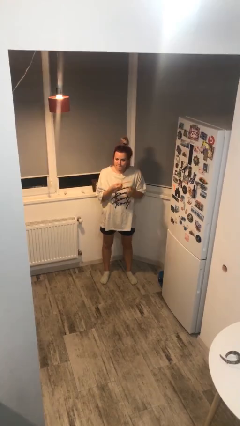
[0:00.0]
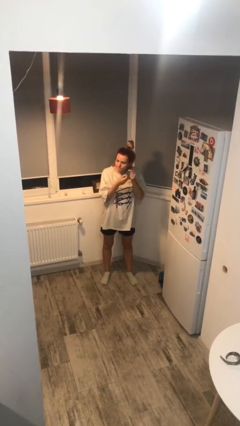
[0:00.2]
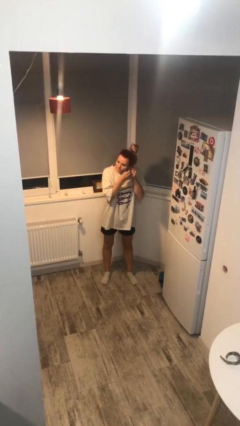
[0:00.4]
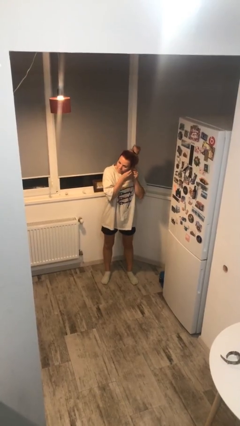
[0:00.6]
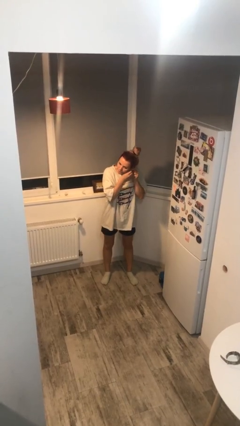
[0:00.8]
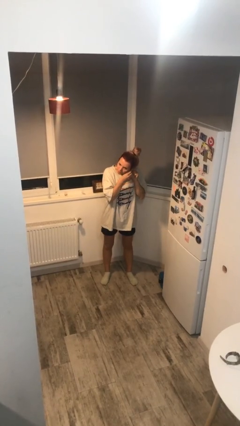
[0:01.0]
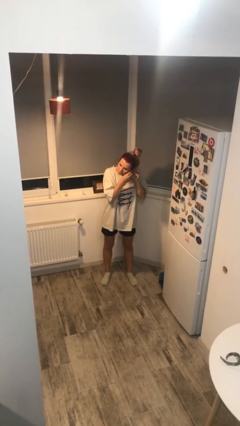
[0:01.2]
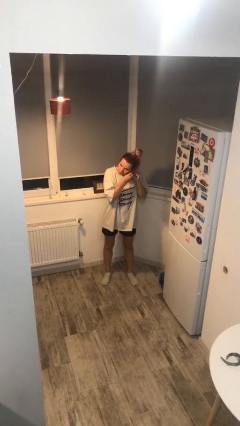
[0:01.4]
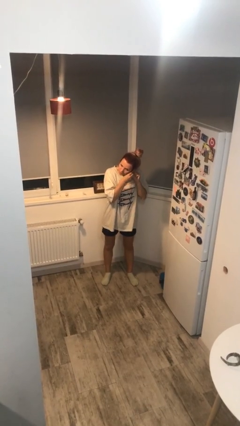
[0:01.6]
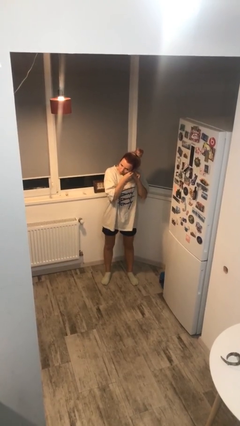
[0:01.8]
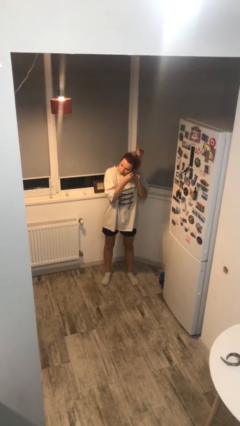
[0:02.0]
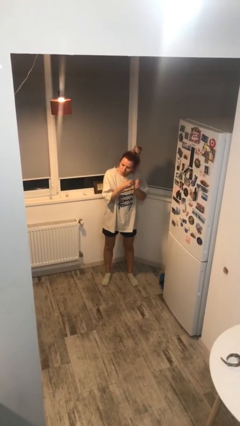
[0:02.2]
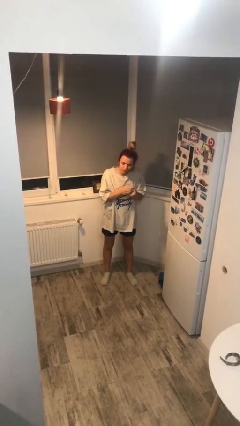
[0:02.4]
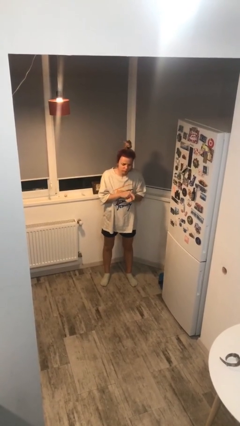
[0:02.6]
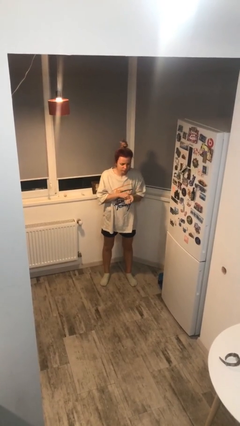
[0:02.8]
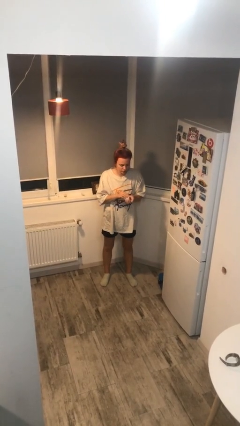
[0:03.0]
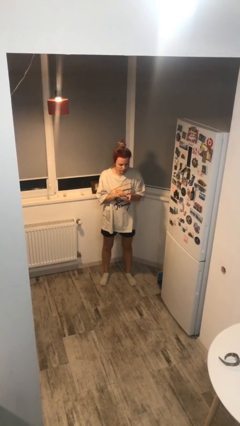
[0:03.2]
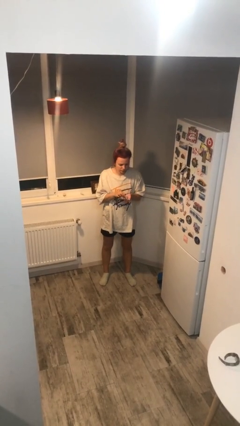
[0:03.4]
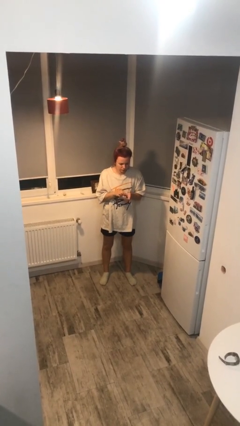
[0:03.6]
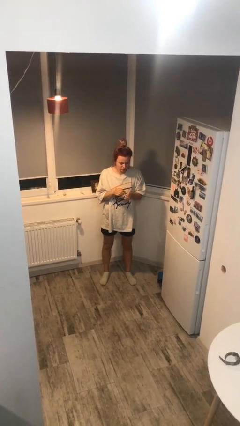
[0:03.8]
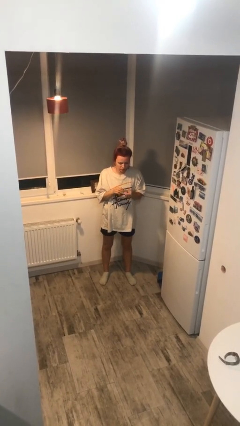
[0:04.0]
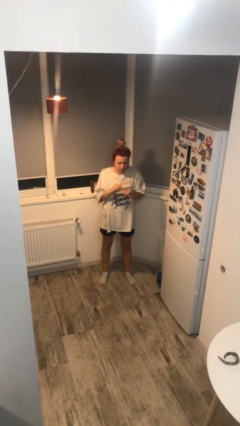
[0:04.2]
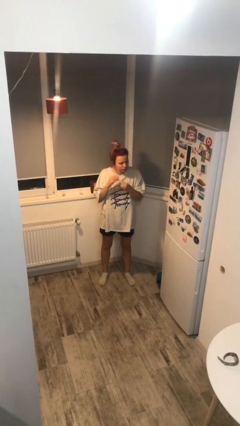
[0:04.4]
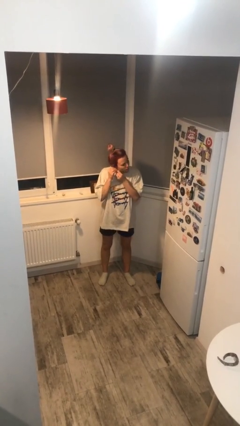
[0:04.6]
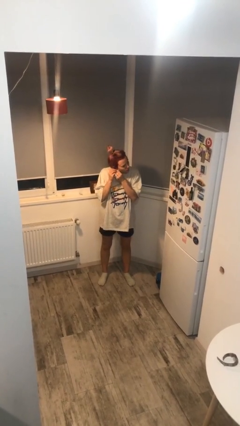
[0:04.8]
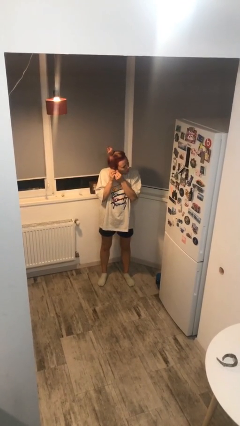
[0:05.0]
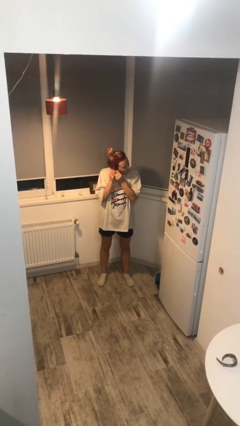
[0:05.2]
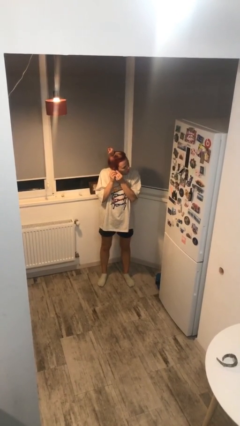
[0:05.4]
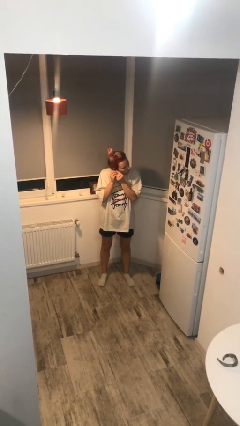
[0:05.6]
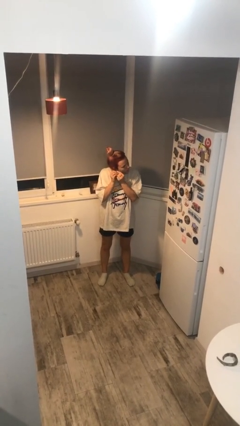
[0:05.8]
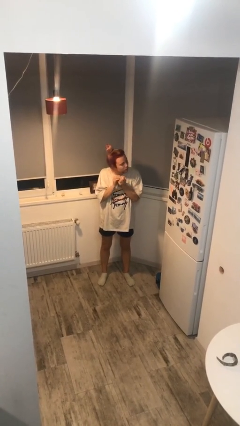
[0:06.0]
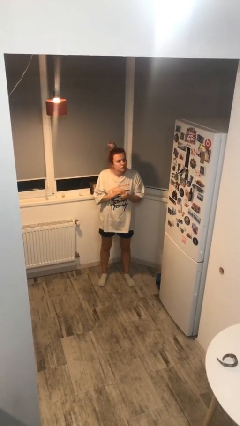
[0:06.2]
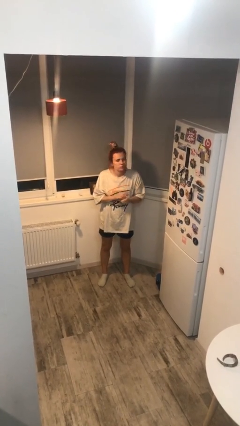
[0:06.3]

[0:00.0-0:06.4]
person puts on earrings

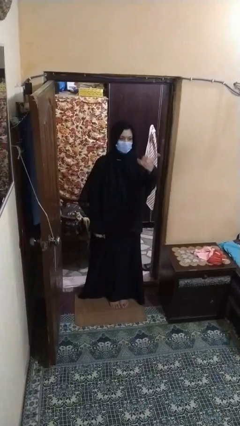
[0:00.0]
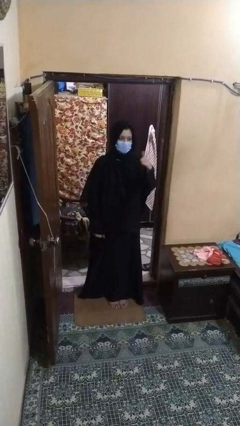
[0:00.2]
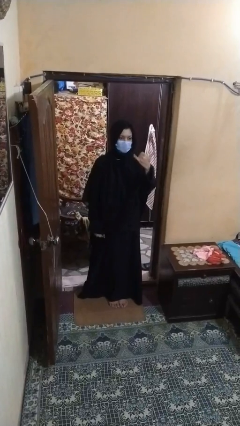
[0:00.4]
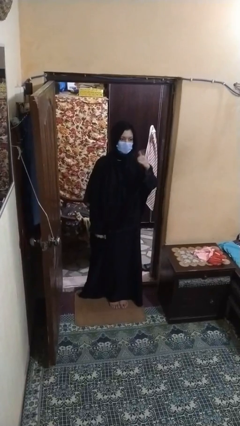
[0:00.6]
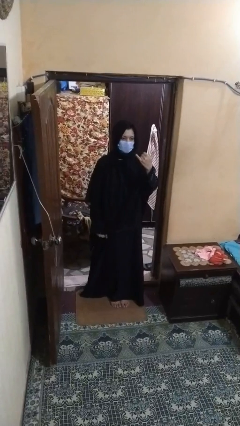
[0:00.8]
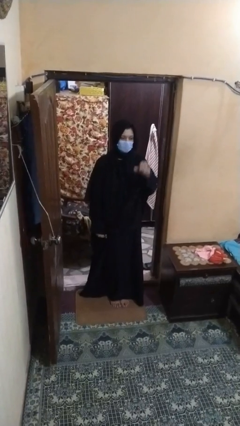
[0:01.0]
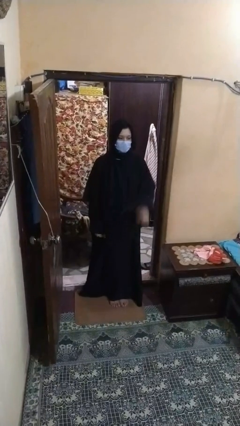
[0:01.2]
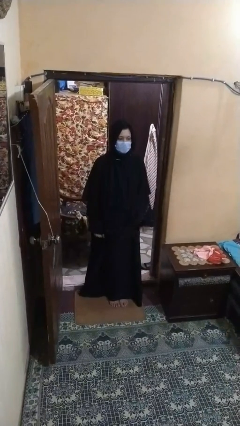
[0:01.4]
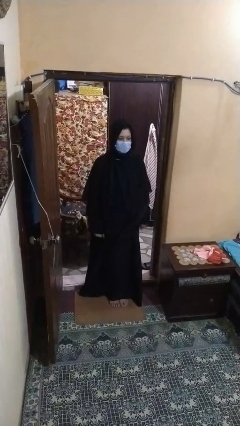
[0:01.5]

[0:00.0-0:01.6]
person gestures hang loose

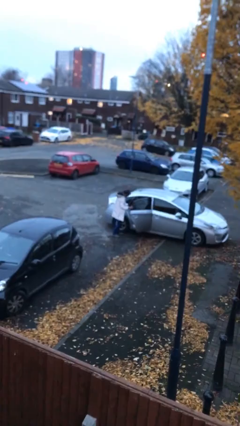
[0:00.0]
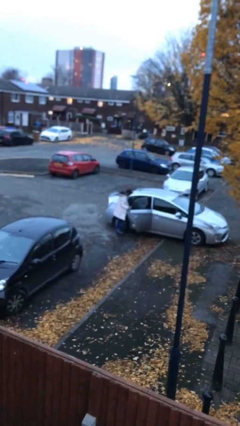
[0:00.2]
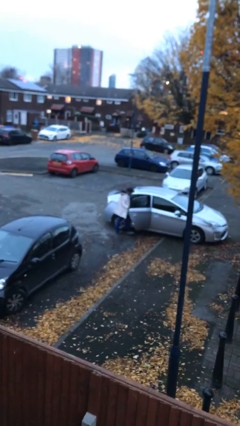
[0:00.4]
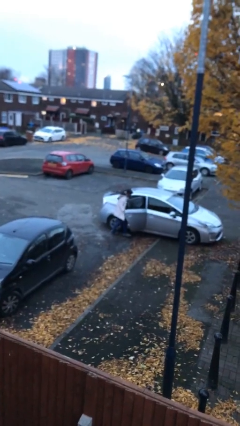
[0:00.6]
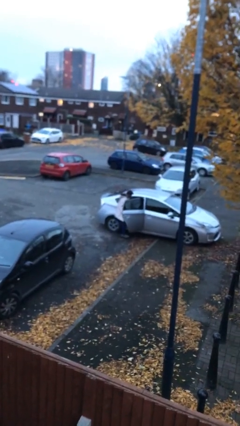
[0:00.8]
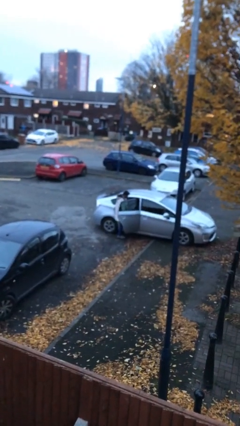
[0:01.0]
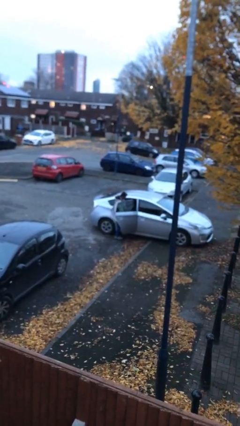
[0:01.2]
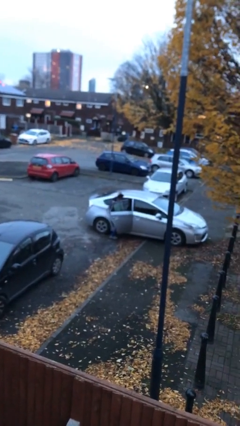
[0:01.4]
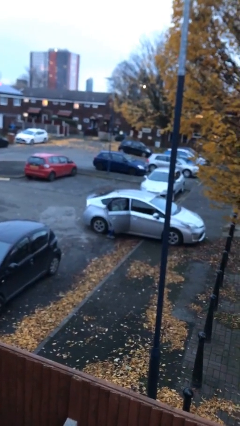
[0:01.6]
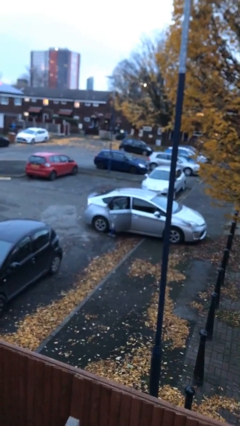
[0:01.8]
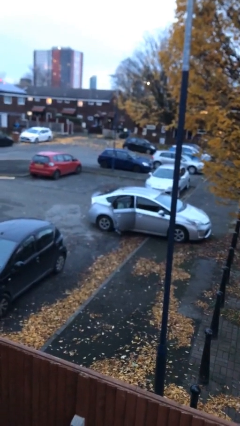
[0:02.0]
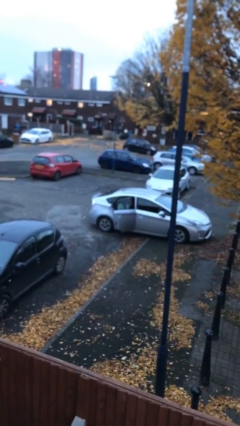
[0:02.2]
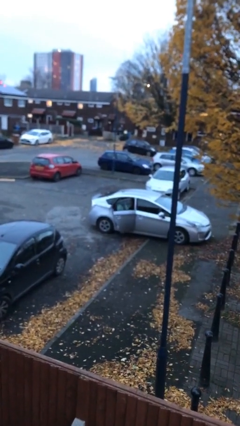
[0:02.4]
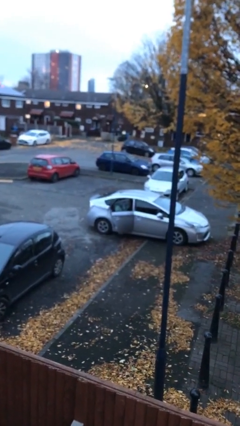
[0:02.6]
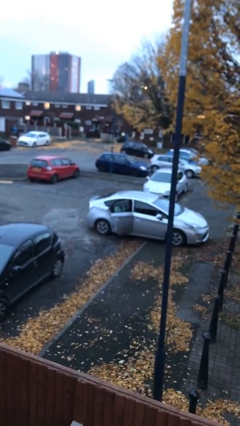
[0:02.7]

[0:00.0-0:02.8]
person enters car

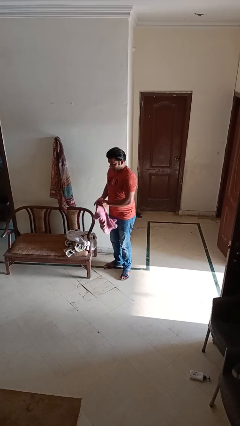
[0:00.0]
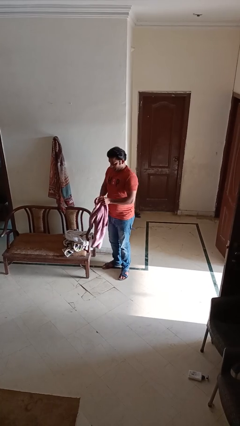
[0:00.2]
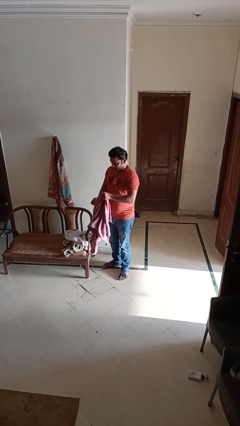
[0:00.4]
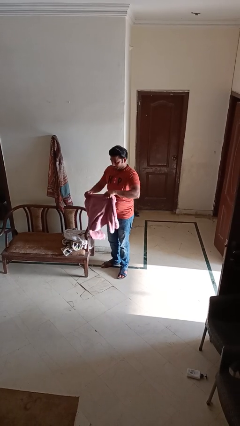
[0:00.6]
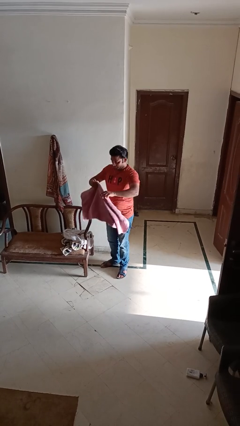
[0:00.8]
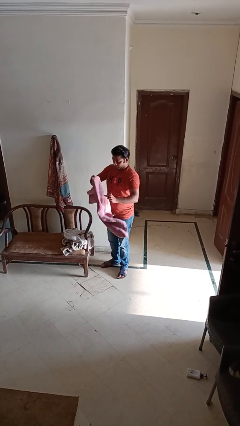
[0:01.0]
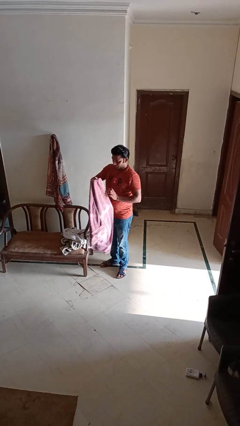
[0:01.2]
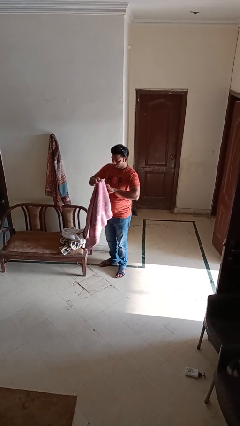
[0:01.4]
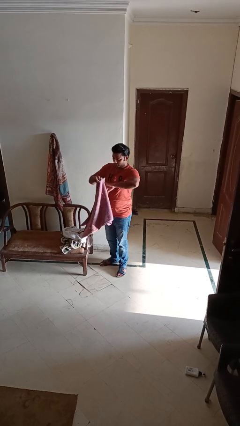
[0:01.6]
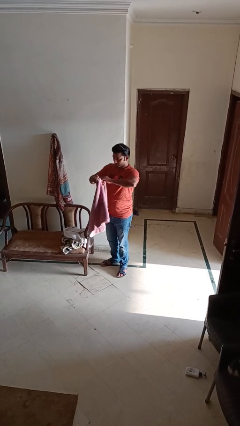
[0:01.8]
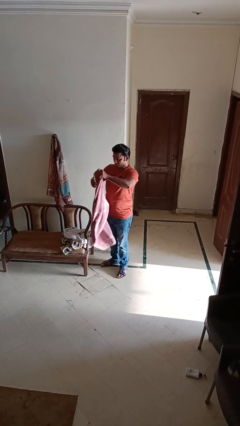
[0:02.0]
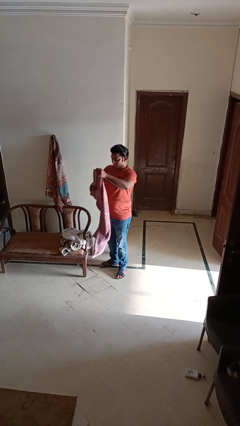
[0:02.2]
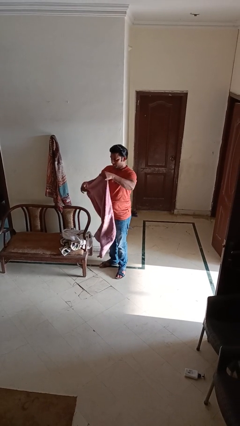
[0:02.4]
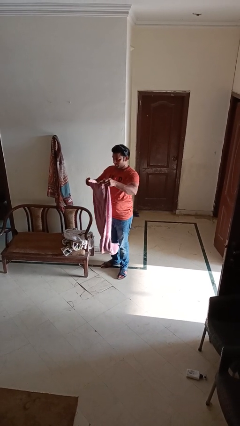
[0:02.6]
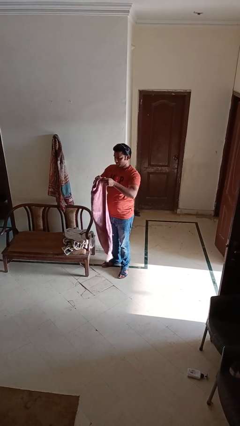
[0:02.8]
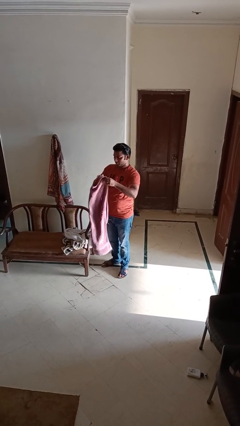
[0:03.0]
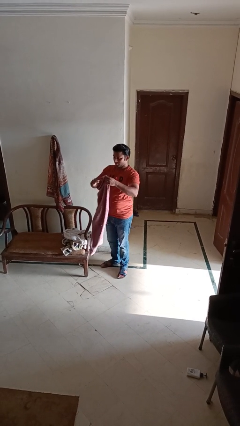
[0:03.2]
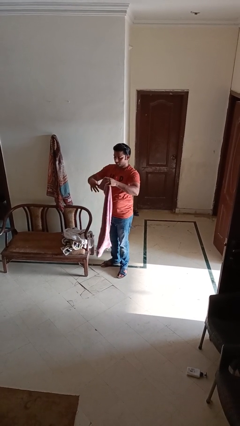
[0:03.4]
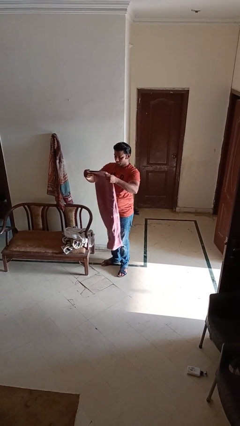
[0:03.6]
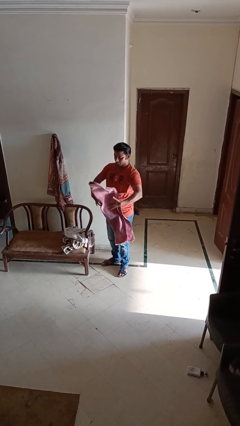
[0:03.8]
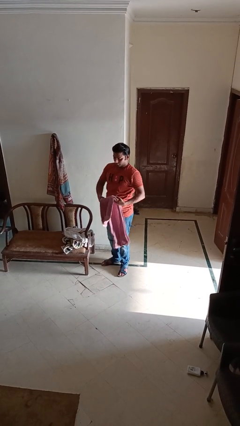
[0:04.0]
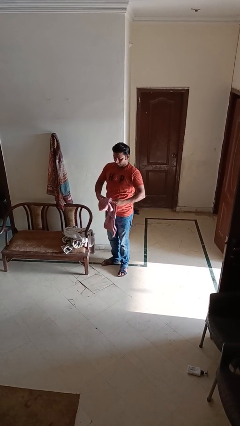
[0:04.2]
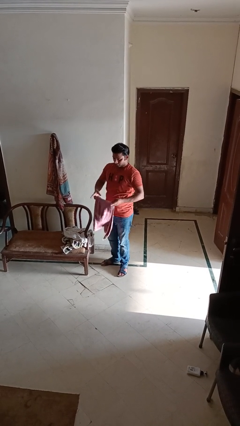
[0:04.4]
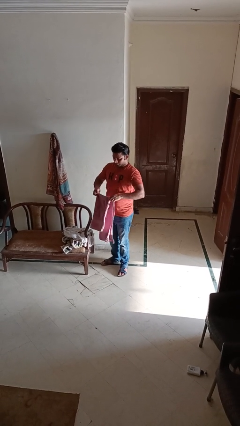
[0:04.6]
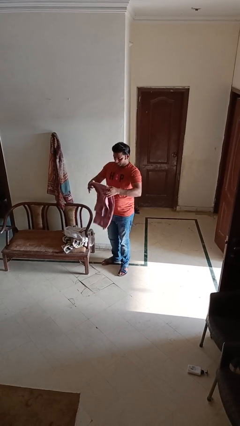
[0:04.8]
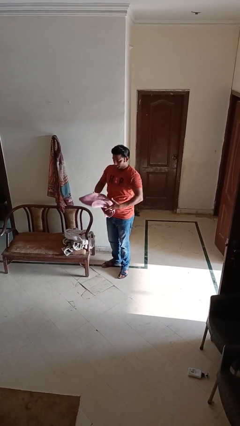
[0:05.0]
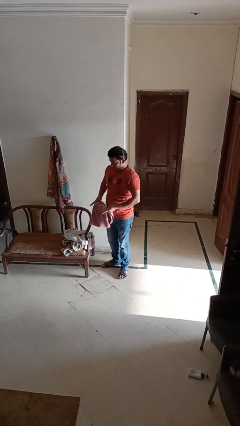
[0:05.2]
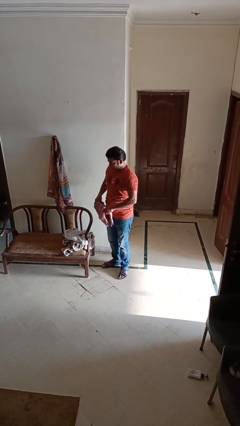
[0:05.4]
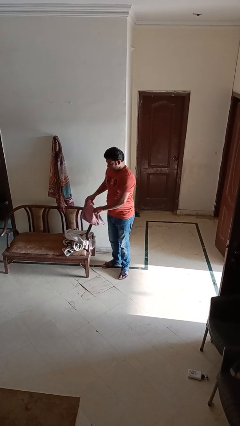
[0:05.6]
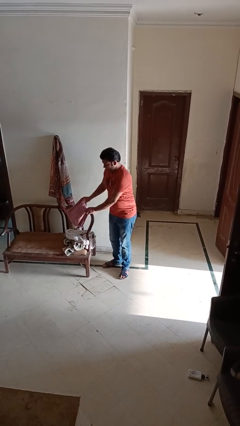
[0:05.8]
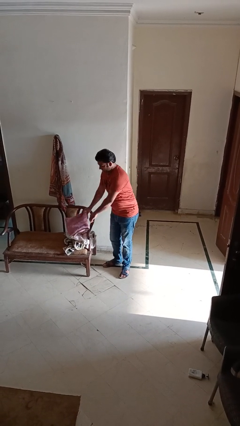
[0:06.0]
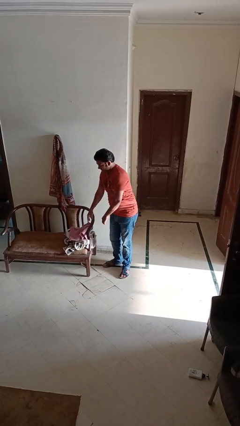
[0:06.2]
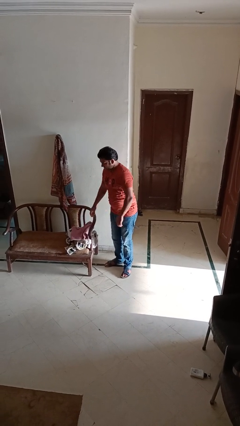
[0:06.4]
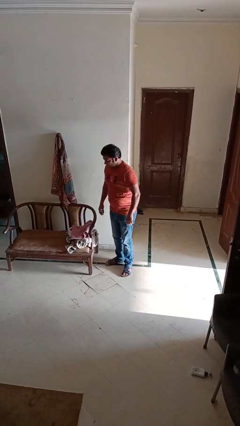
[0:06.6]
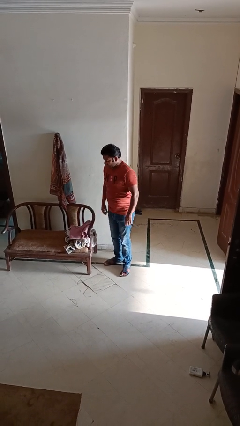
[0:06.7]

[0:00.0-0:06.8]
person folds towel

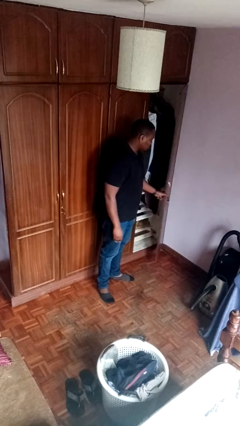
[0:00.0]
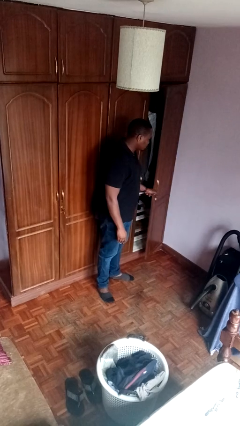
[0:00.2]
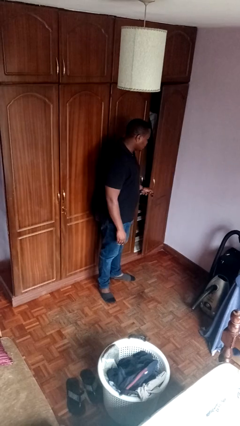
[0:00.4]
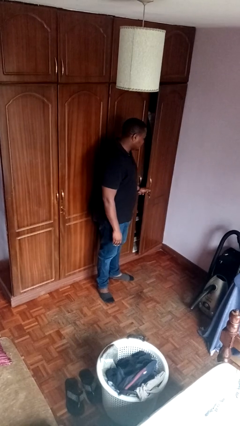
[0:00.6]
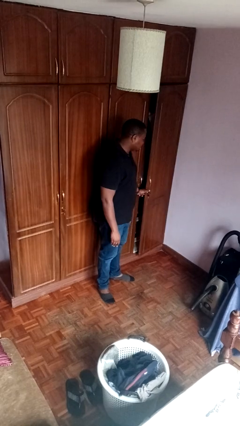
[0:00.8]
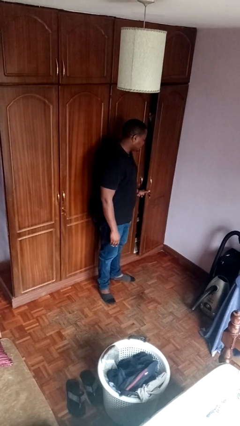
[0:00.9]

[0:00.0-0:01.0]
person closes closet door
